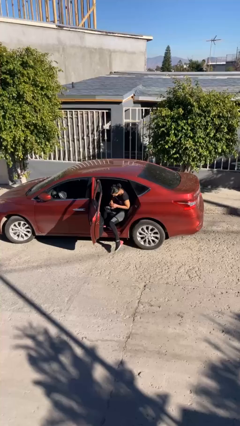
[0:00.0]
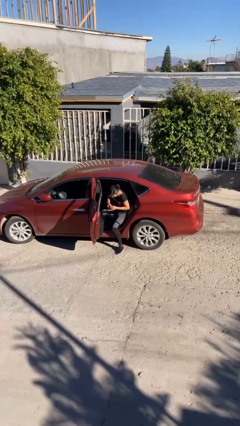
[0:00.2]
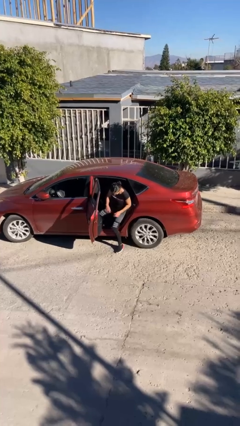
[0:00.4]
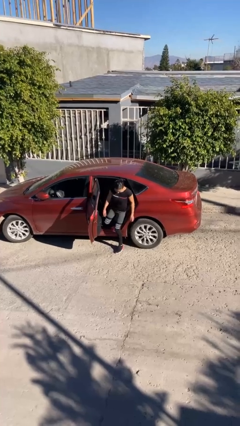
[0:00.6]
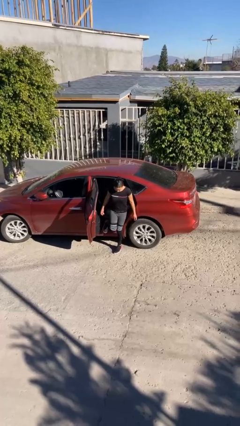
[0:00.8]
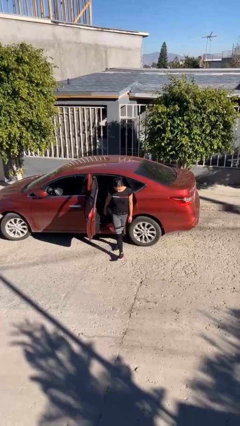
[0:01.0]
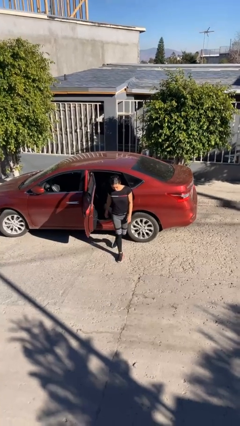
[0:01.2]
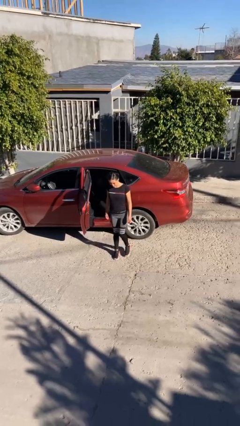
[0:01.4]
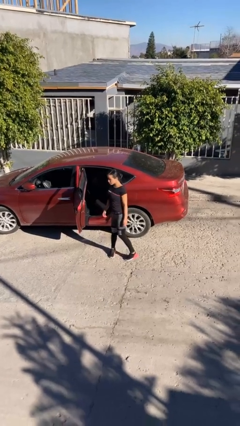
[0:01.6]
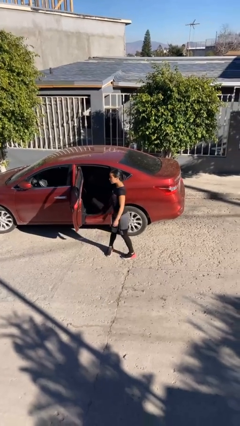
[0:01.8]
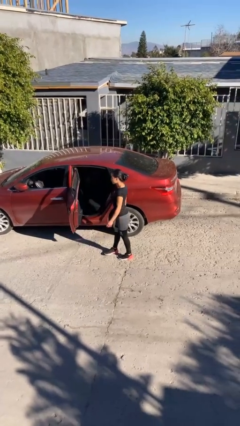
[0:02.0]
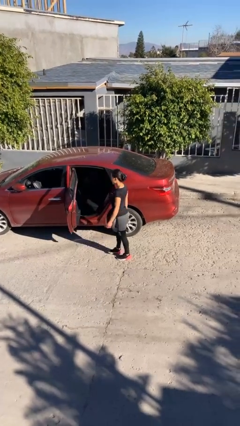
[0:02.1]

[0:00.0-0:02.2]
person exits car

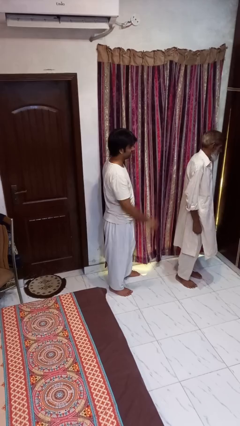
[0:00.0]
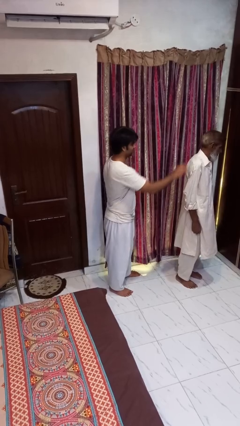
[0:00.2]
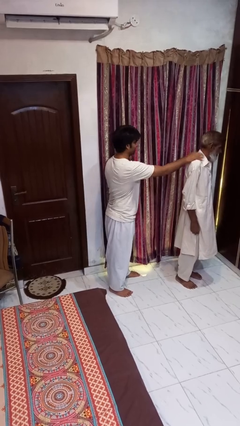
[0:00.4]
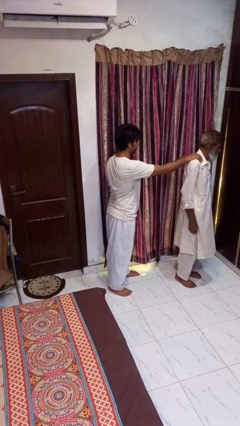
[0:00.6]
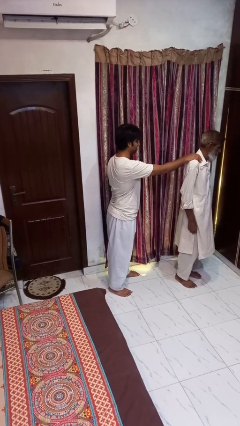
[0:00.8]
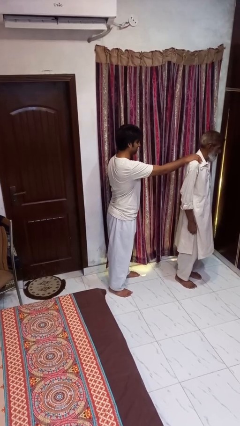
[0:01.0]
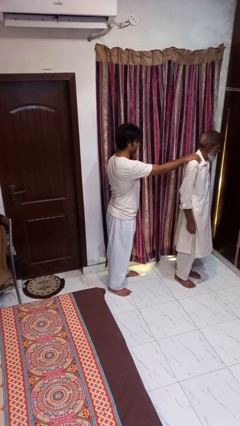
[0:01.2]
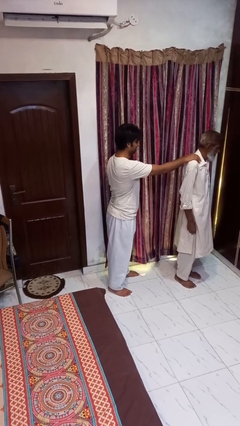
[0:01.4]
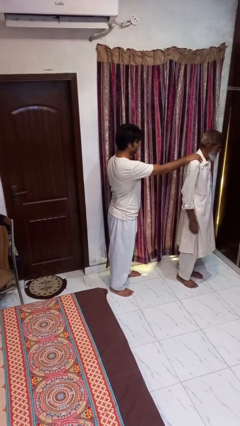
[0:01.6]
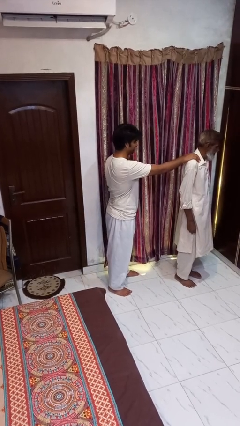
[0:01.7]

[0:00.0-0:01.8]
person grabs person by shoulder

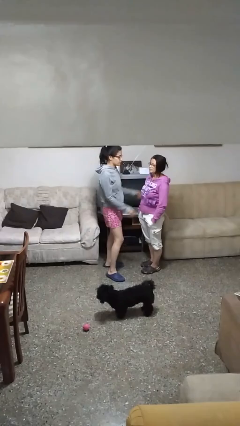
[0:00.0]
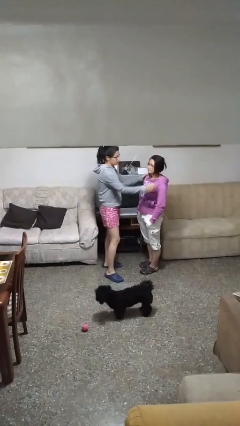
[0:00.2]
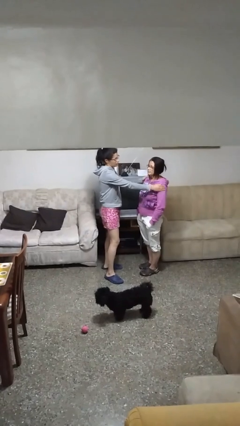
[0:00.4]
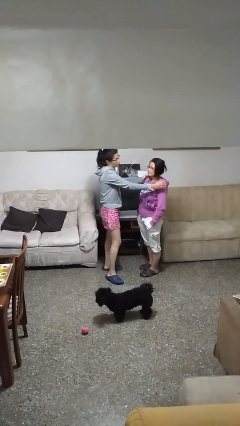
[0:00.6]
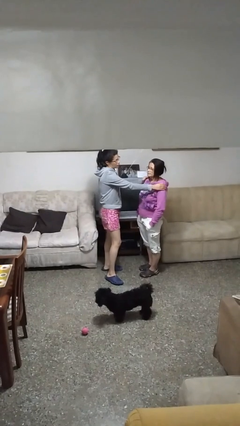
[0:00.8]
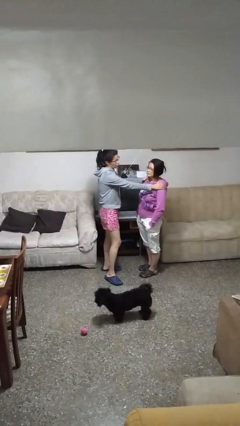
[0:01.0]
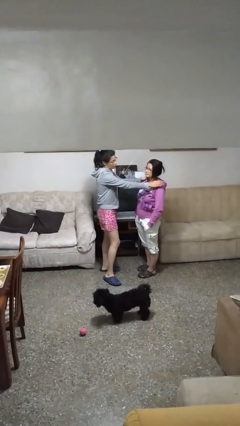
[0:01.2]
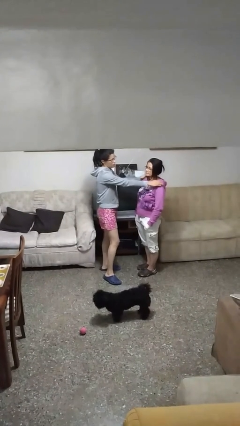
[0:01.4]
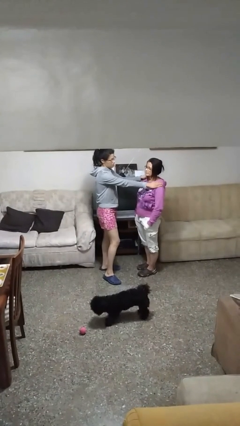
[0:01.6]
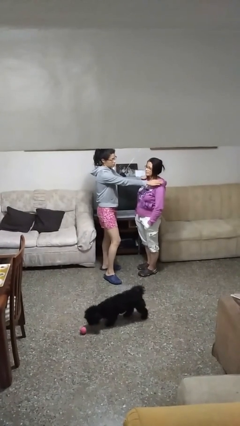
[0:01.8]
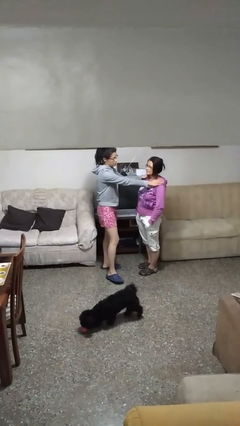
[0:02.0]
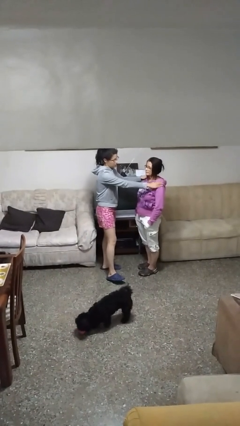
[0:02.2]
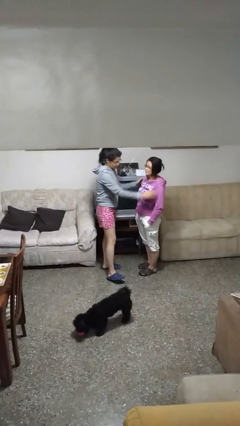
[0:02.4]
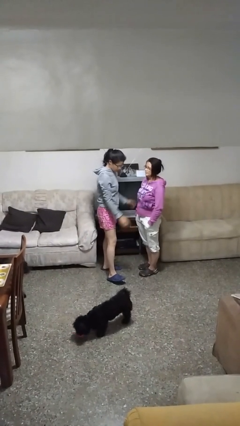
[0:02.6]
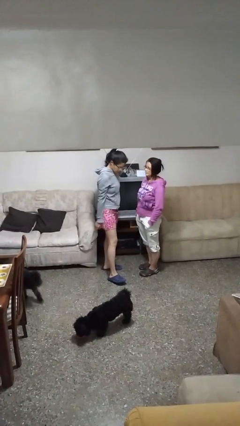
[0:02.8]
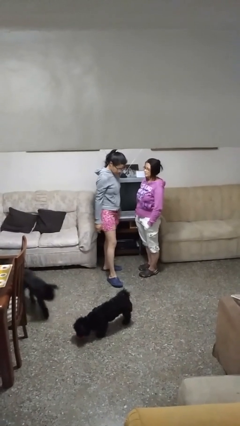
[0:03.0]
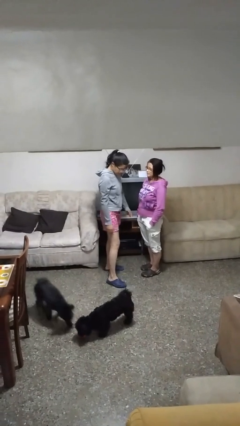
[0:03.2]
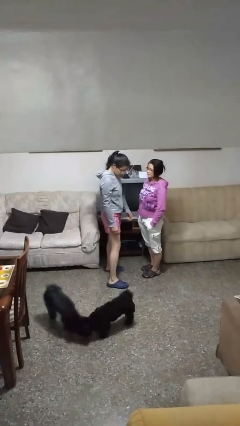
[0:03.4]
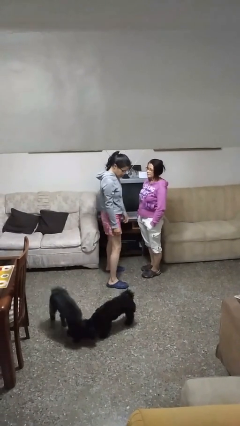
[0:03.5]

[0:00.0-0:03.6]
person pounds shoulders of person

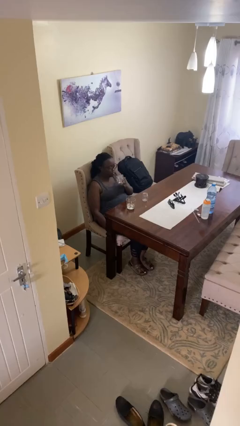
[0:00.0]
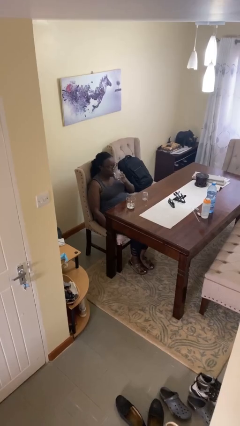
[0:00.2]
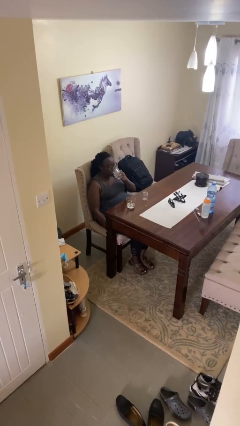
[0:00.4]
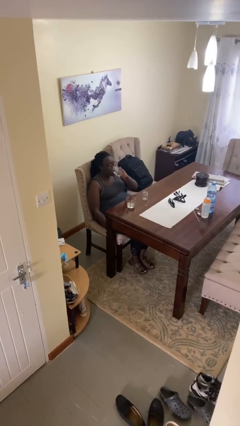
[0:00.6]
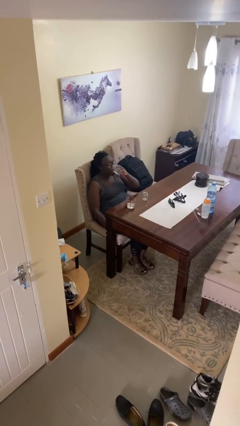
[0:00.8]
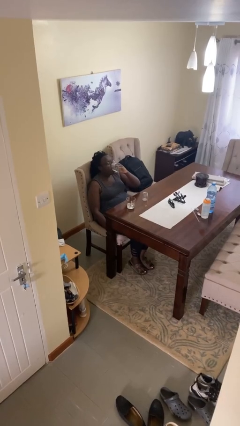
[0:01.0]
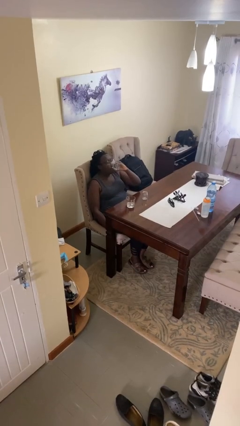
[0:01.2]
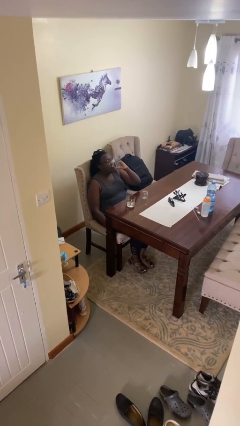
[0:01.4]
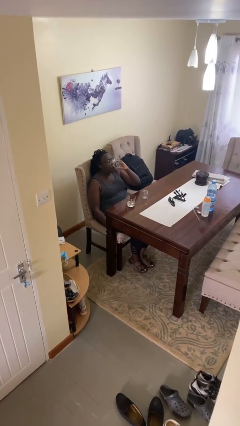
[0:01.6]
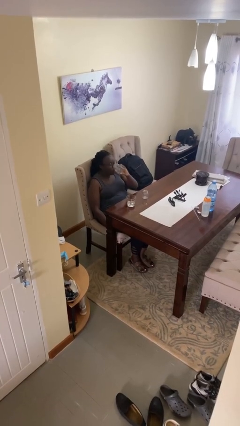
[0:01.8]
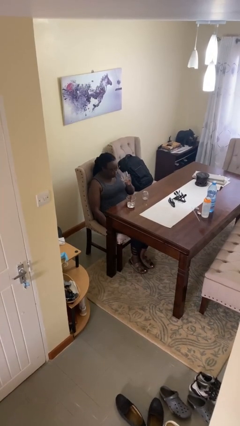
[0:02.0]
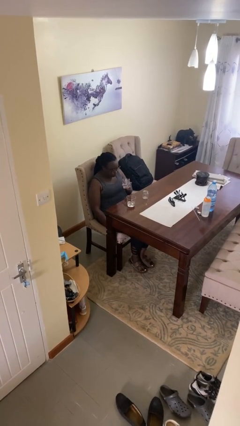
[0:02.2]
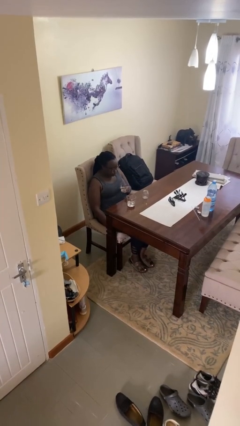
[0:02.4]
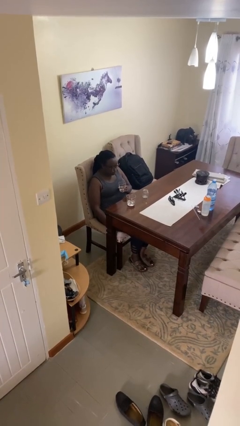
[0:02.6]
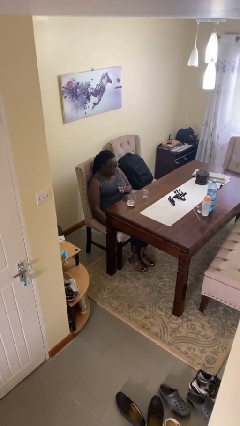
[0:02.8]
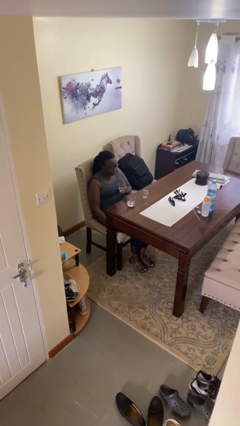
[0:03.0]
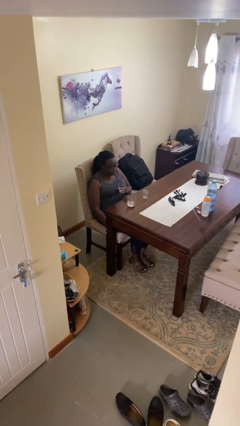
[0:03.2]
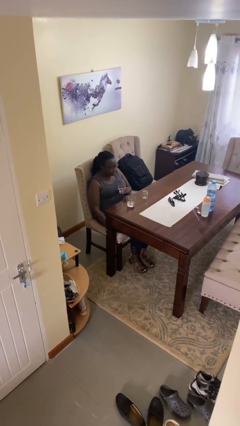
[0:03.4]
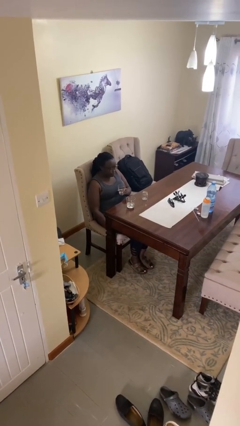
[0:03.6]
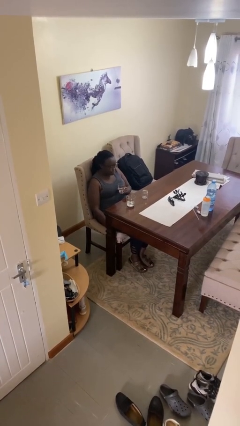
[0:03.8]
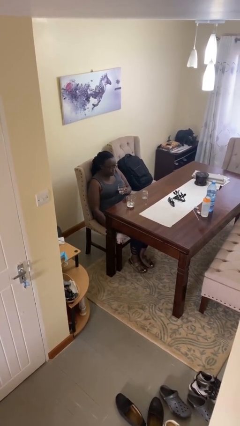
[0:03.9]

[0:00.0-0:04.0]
person drinks from shotglass

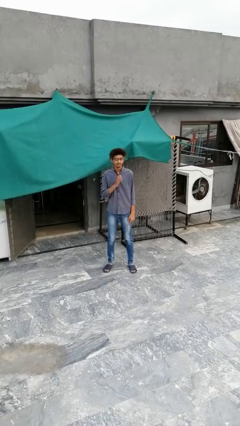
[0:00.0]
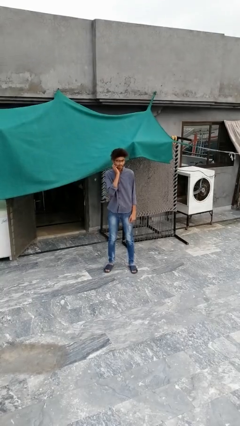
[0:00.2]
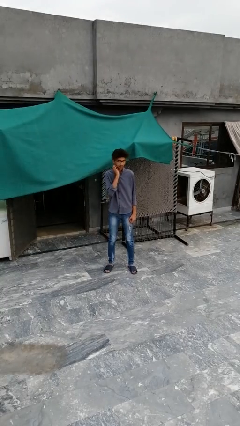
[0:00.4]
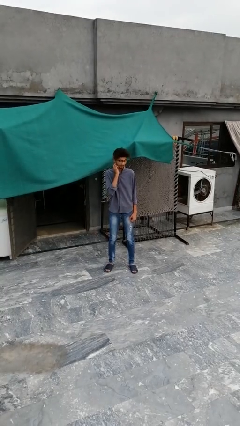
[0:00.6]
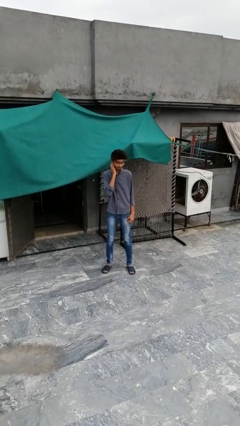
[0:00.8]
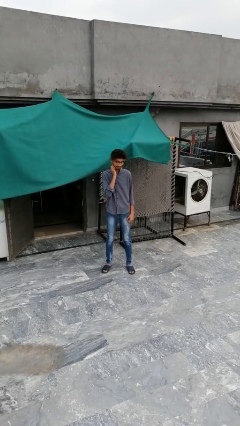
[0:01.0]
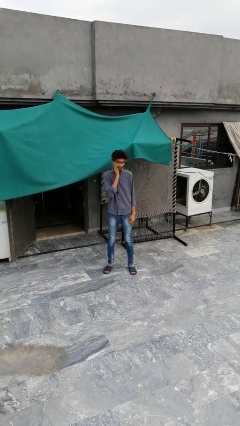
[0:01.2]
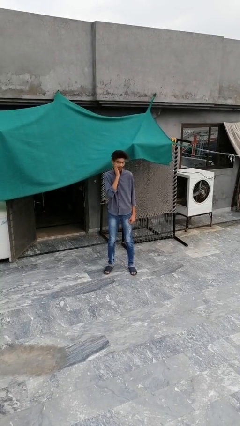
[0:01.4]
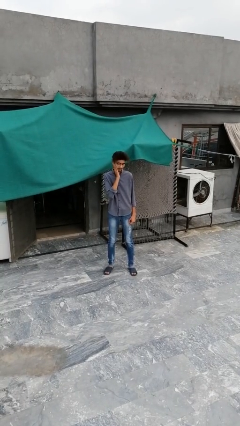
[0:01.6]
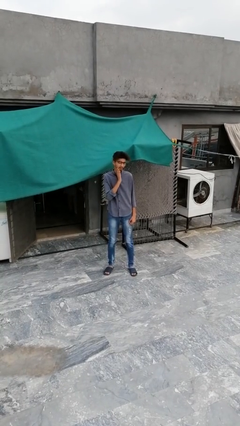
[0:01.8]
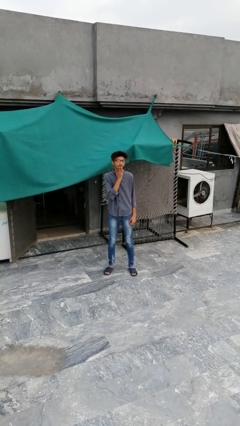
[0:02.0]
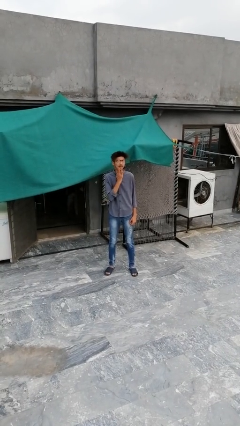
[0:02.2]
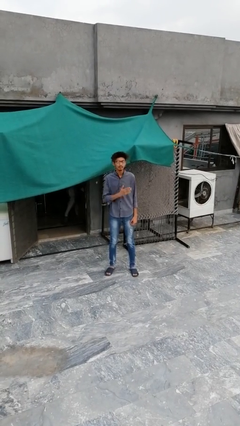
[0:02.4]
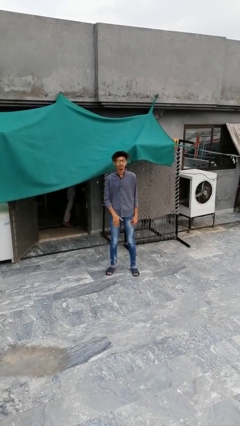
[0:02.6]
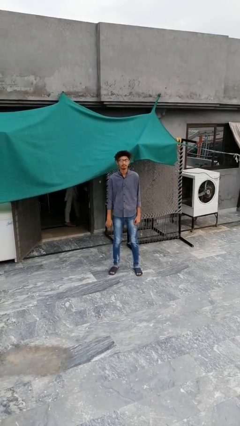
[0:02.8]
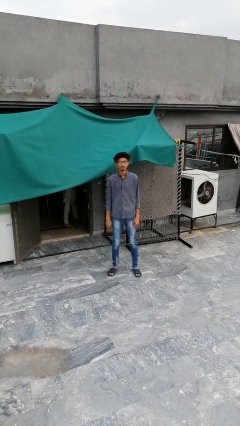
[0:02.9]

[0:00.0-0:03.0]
person strokes chin

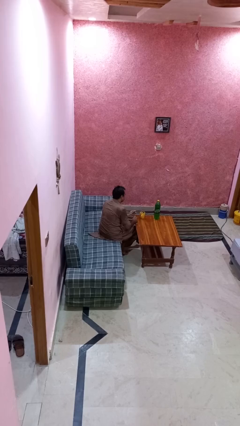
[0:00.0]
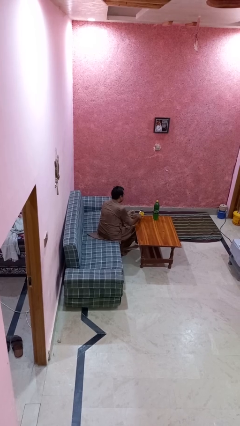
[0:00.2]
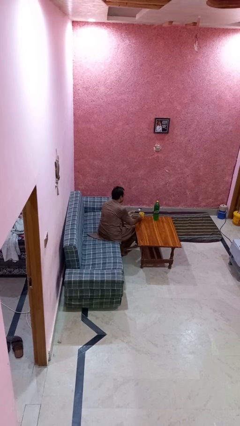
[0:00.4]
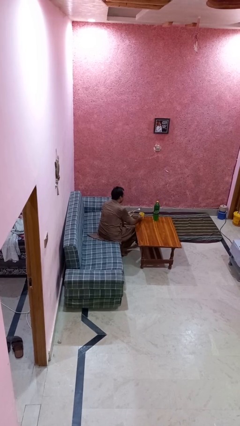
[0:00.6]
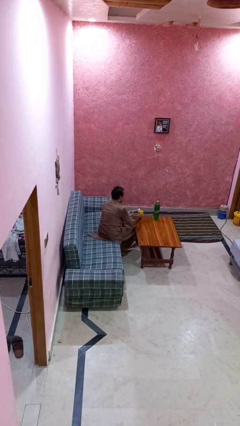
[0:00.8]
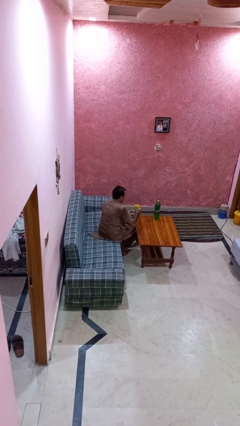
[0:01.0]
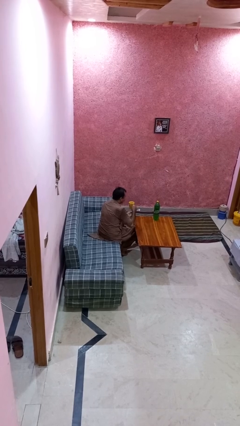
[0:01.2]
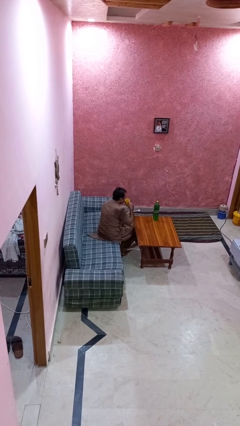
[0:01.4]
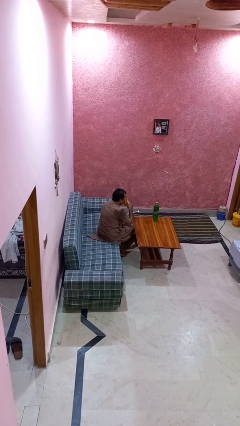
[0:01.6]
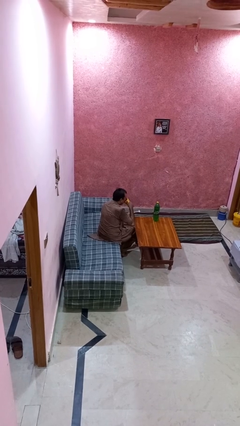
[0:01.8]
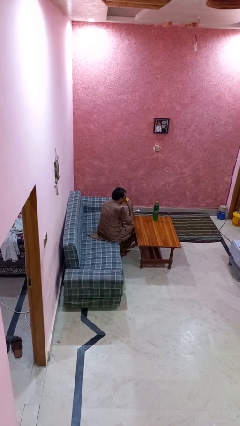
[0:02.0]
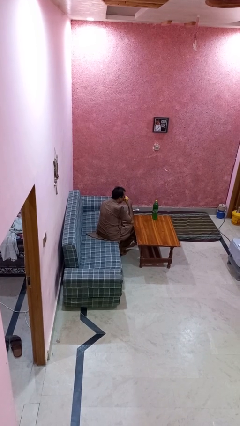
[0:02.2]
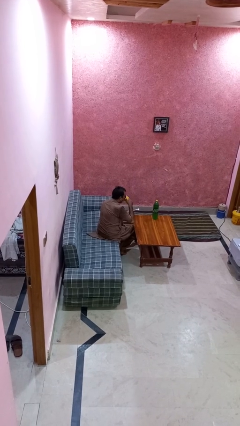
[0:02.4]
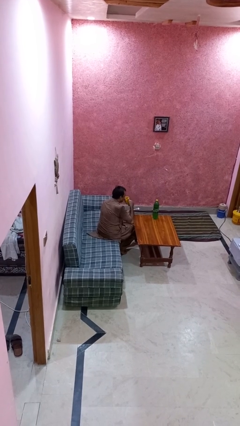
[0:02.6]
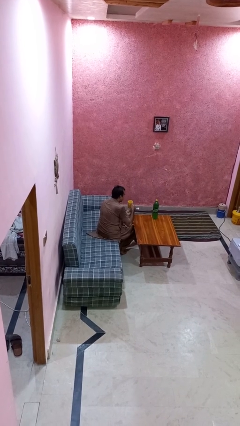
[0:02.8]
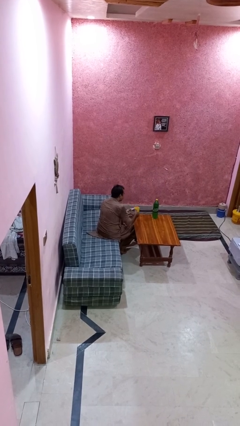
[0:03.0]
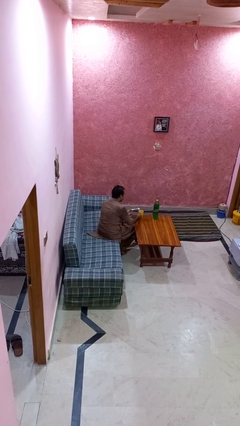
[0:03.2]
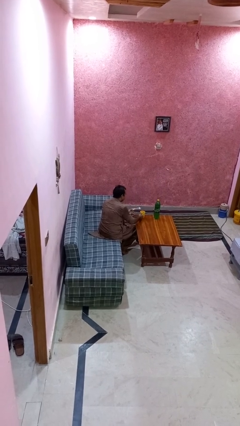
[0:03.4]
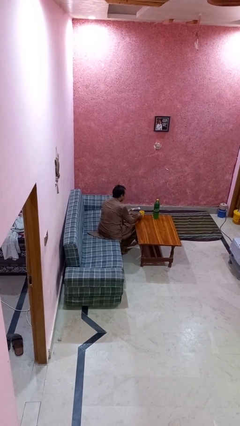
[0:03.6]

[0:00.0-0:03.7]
person drinks from mug
